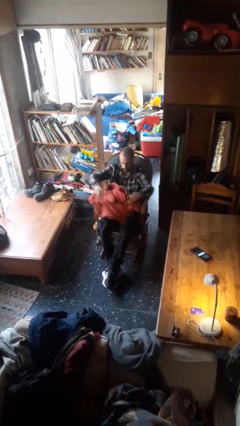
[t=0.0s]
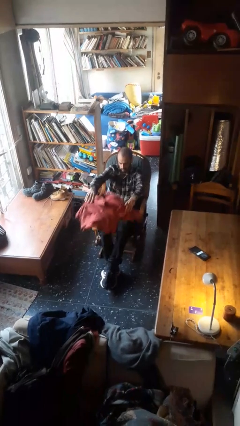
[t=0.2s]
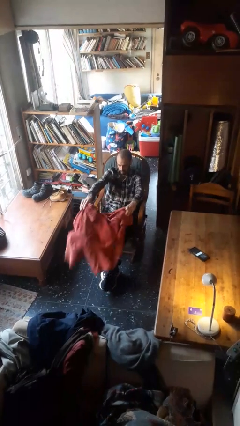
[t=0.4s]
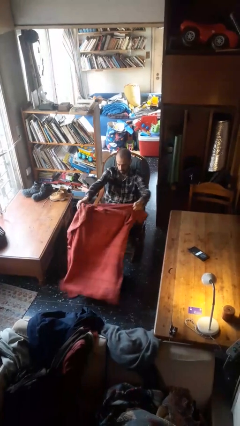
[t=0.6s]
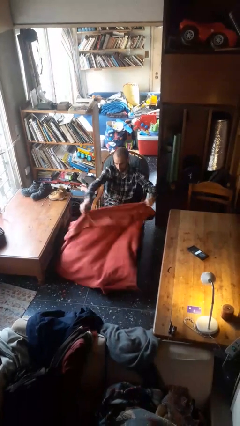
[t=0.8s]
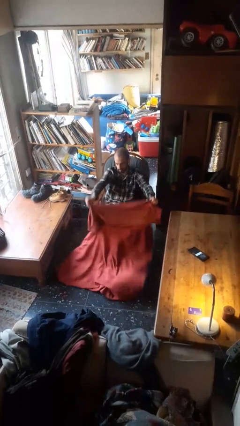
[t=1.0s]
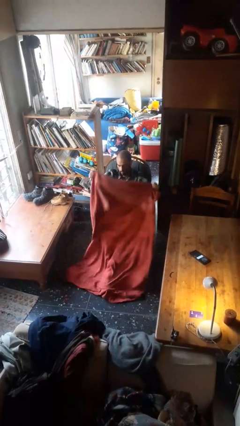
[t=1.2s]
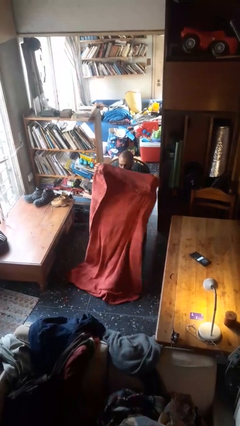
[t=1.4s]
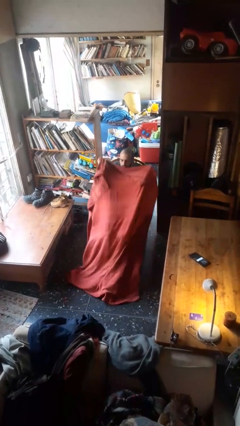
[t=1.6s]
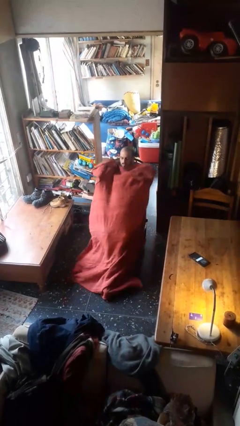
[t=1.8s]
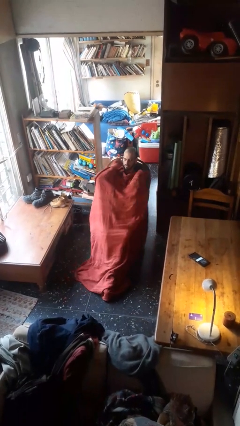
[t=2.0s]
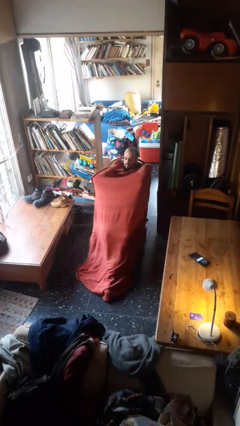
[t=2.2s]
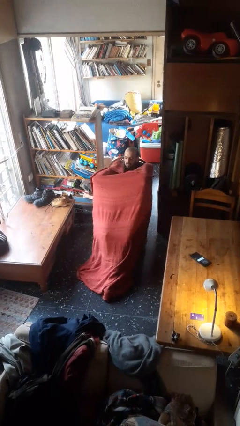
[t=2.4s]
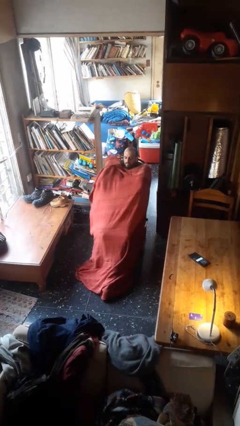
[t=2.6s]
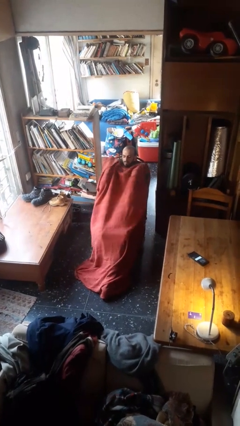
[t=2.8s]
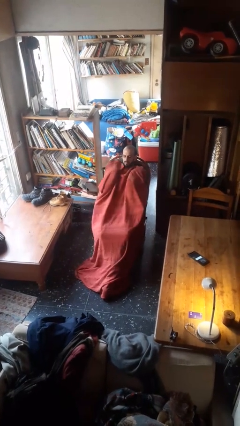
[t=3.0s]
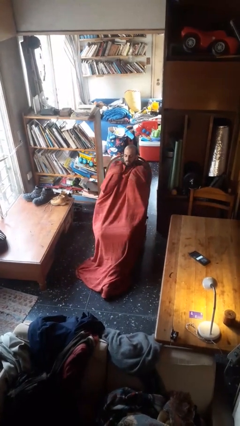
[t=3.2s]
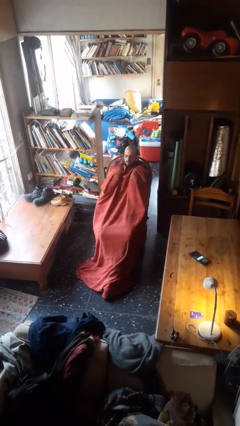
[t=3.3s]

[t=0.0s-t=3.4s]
person covers with blanket

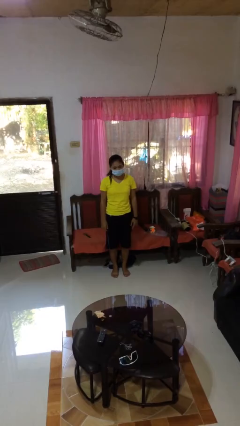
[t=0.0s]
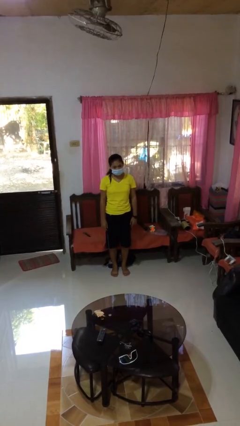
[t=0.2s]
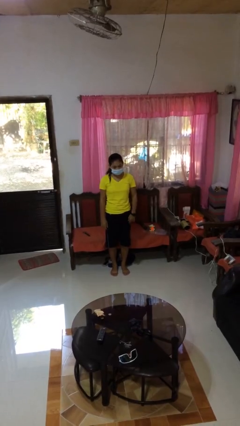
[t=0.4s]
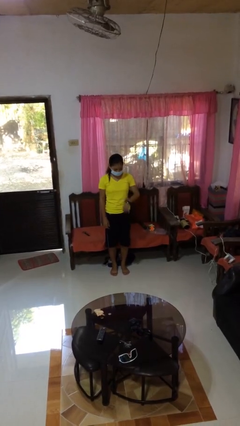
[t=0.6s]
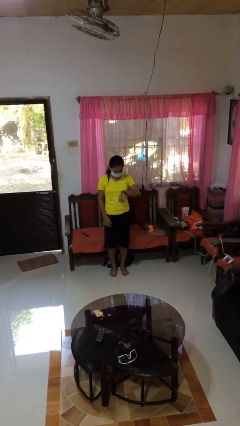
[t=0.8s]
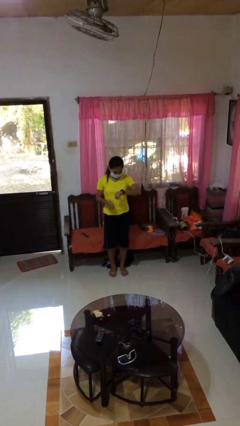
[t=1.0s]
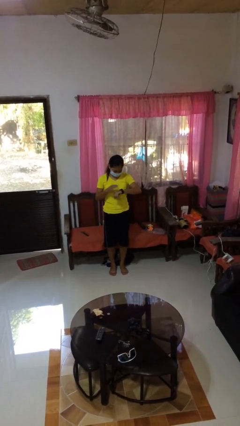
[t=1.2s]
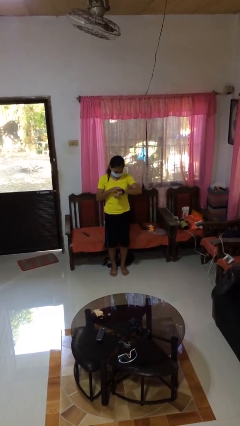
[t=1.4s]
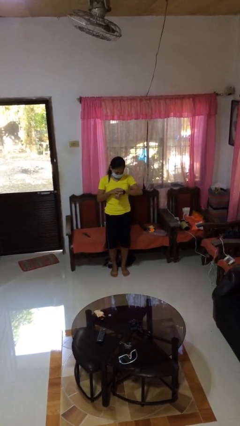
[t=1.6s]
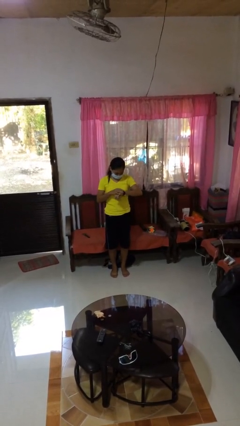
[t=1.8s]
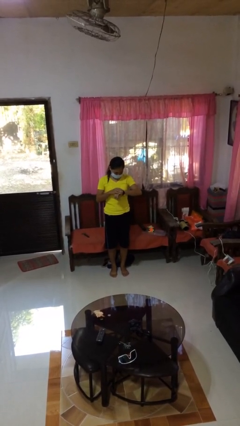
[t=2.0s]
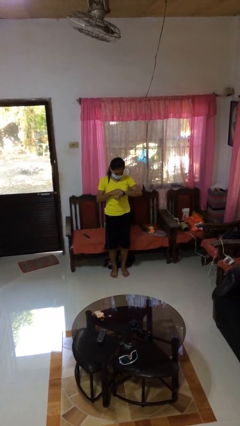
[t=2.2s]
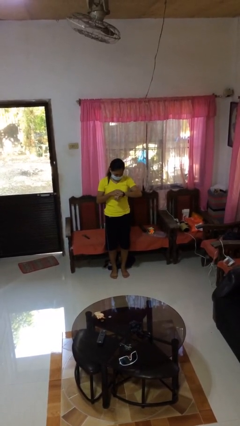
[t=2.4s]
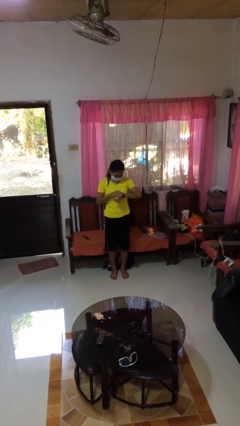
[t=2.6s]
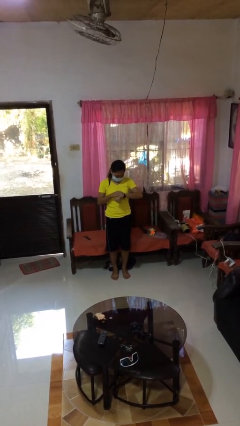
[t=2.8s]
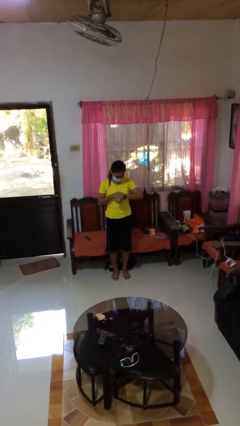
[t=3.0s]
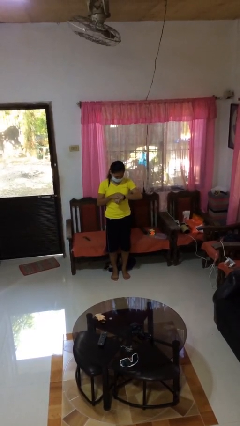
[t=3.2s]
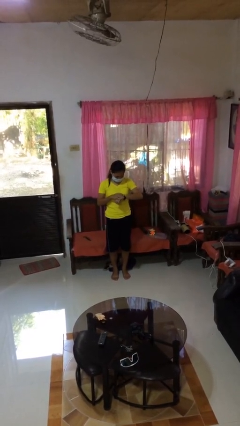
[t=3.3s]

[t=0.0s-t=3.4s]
person looks at wristwatch

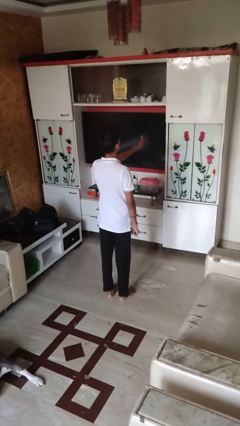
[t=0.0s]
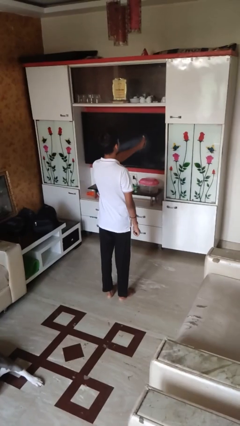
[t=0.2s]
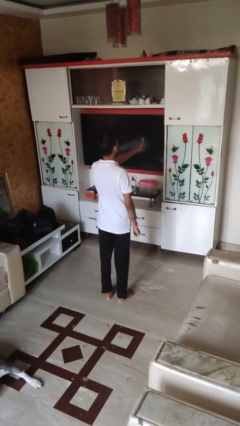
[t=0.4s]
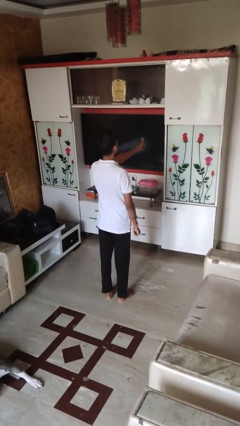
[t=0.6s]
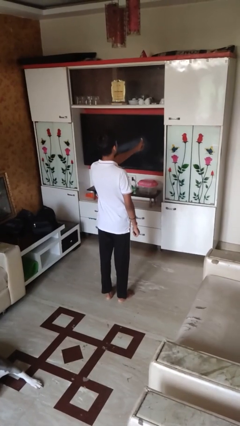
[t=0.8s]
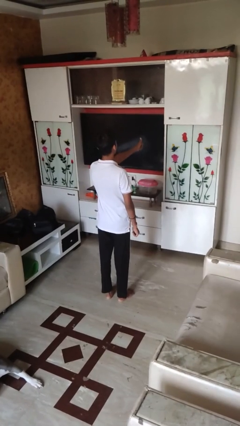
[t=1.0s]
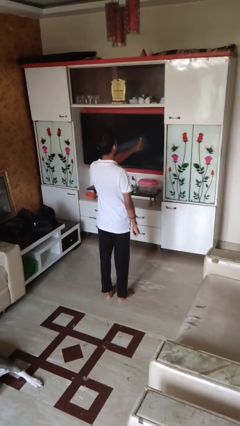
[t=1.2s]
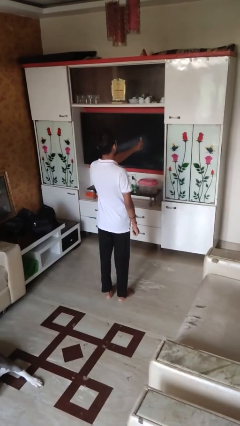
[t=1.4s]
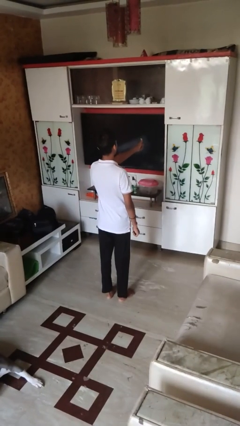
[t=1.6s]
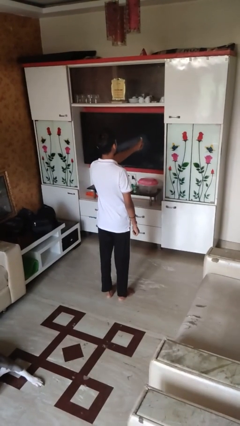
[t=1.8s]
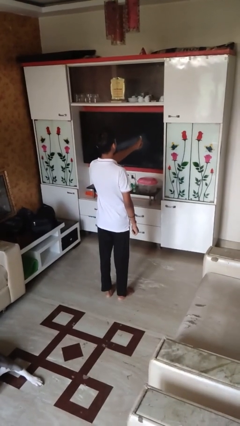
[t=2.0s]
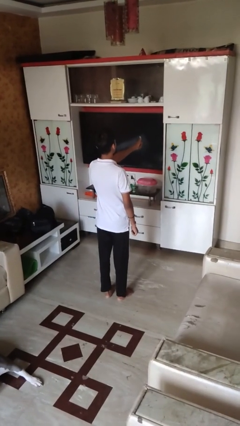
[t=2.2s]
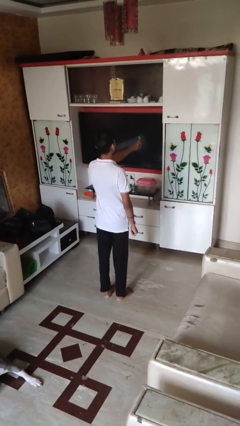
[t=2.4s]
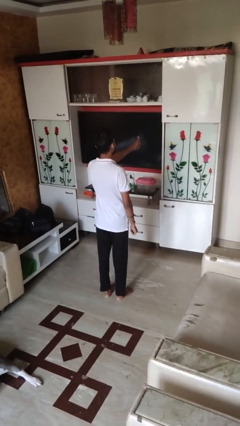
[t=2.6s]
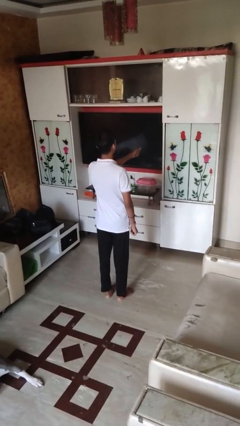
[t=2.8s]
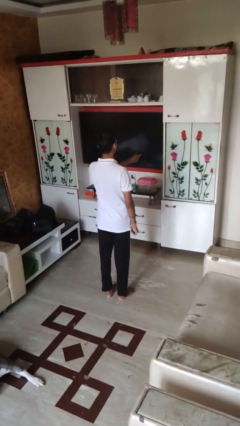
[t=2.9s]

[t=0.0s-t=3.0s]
person gestures thumbs up

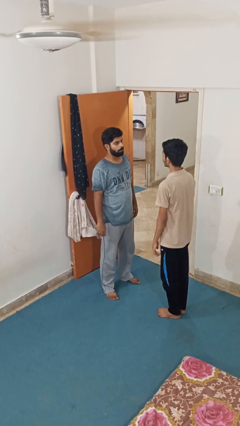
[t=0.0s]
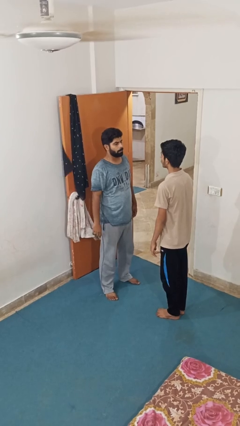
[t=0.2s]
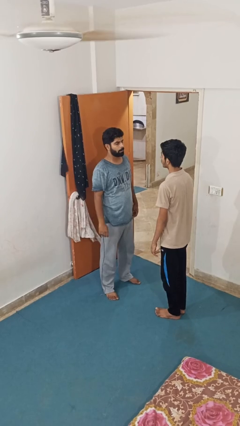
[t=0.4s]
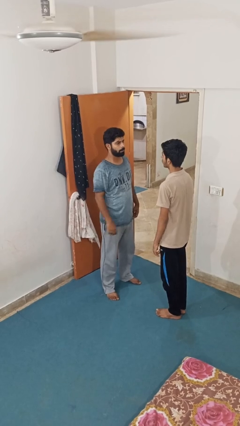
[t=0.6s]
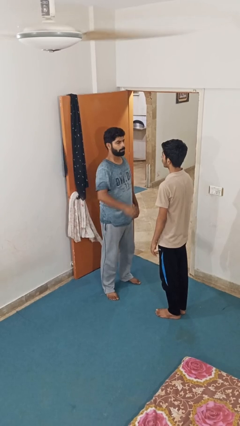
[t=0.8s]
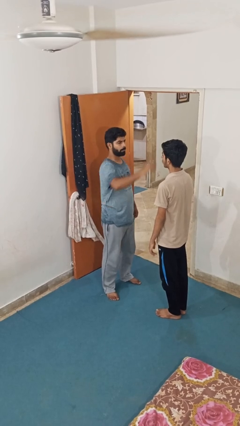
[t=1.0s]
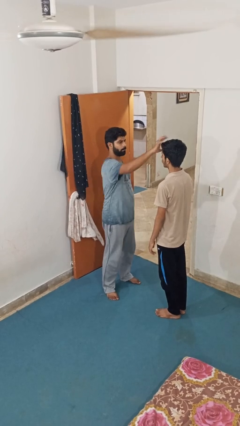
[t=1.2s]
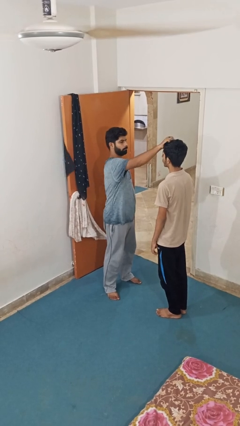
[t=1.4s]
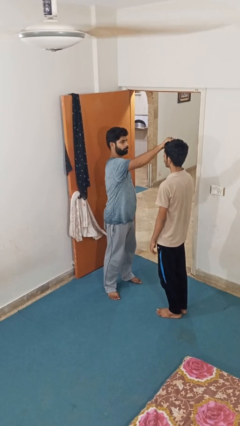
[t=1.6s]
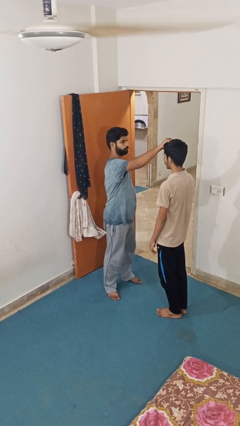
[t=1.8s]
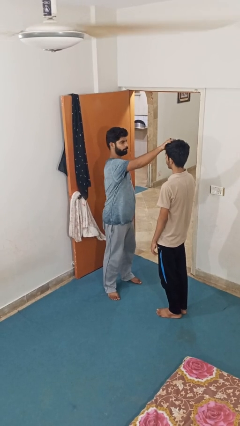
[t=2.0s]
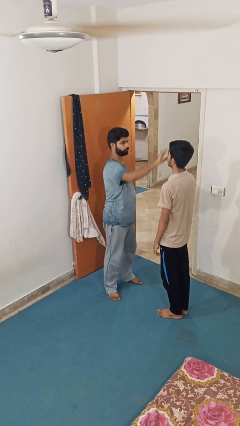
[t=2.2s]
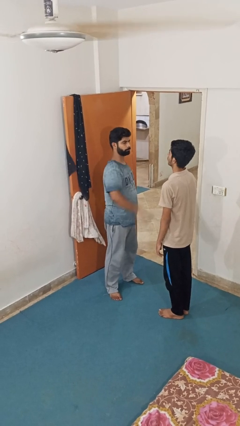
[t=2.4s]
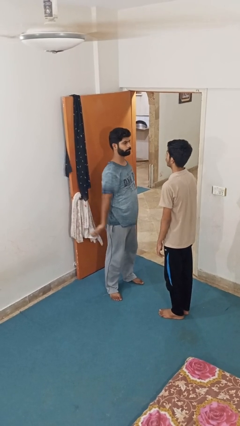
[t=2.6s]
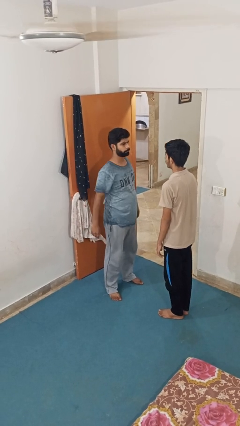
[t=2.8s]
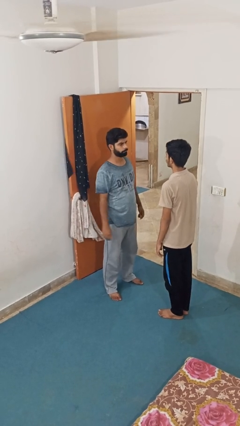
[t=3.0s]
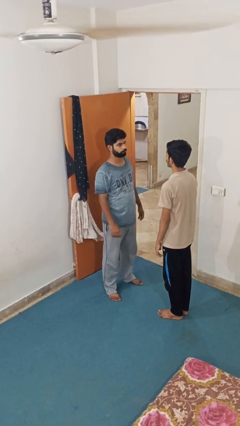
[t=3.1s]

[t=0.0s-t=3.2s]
person grabs person by hair

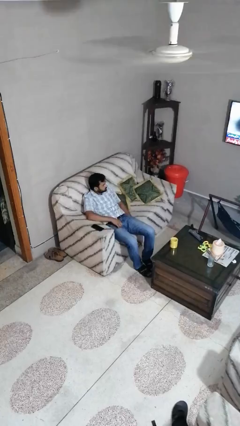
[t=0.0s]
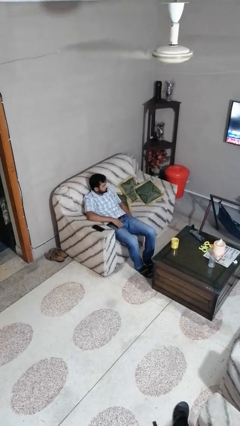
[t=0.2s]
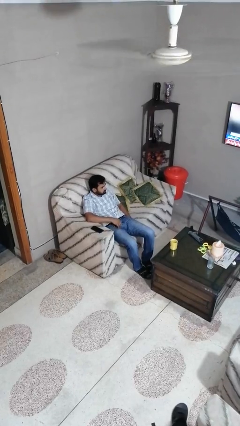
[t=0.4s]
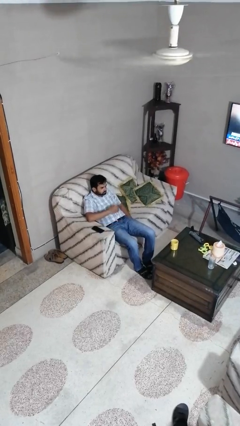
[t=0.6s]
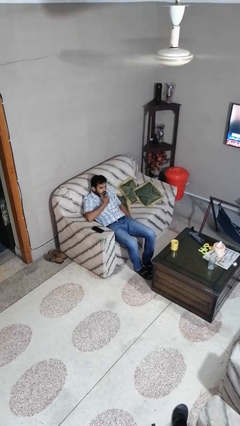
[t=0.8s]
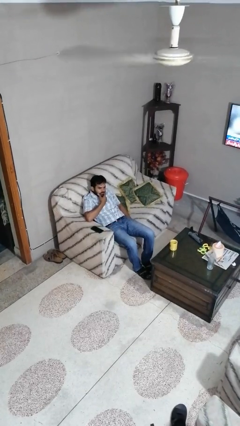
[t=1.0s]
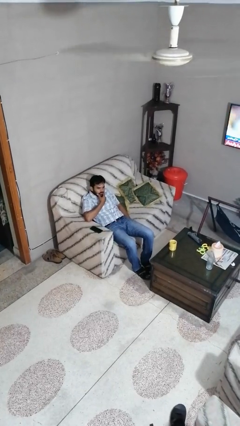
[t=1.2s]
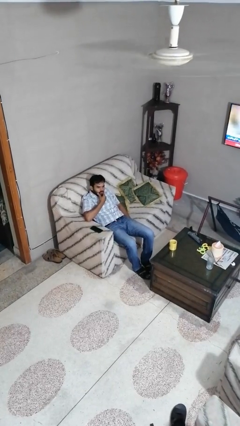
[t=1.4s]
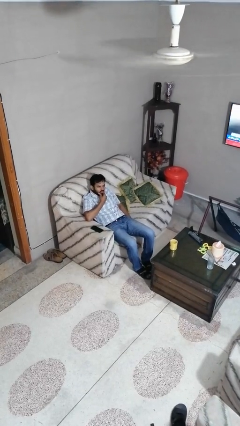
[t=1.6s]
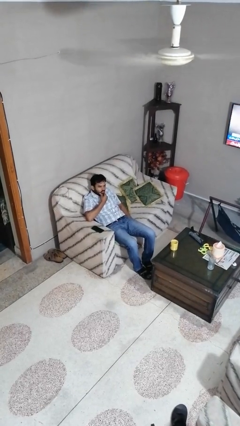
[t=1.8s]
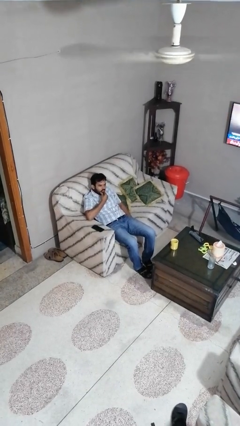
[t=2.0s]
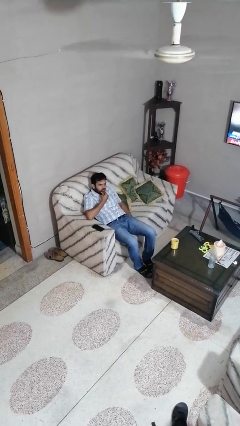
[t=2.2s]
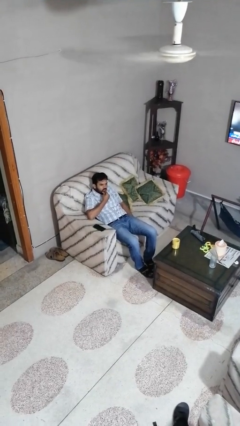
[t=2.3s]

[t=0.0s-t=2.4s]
person strokes chin

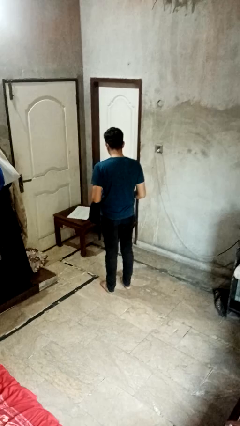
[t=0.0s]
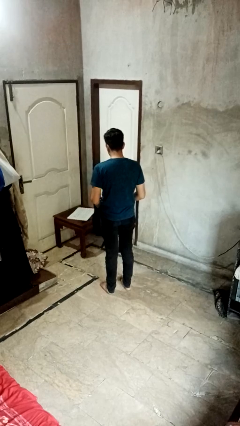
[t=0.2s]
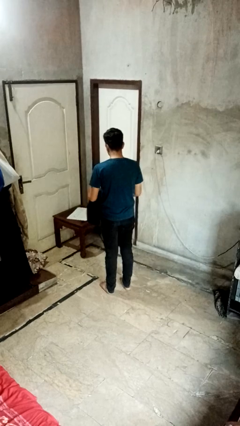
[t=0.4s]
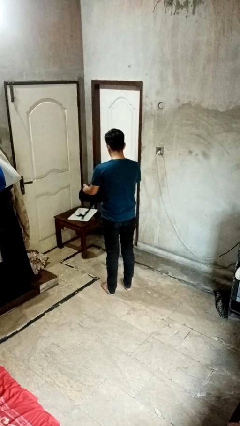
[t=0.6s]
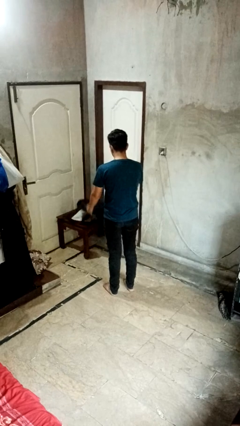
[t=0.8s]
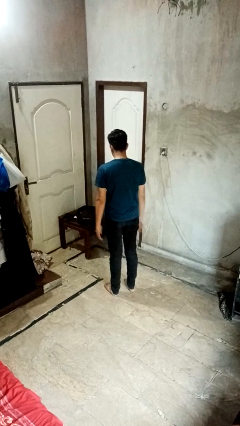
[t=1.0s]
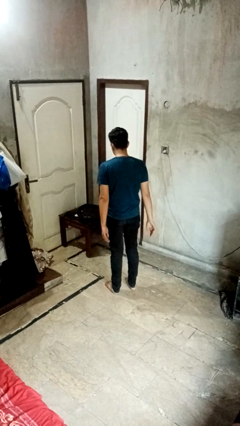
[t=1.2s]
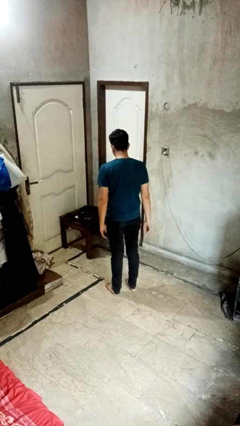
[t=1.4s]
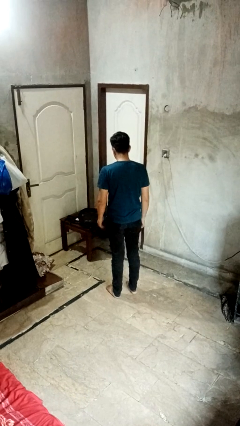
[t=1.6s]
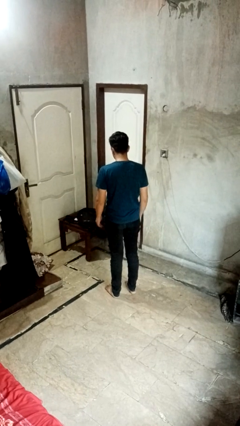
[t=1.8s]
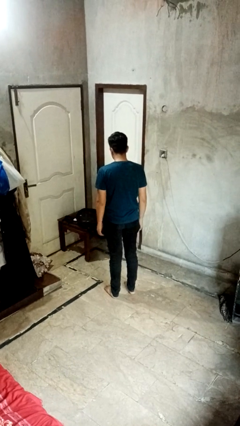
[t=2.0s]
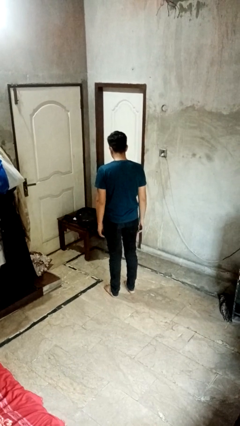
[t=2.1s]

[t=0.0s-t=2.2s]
person throws object on table
